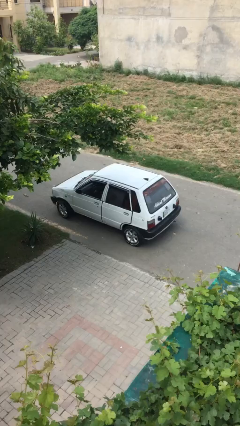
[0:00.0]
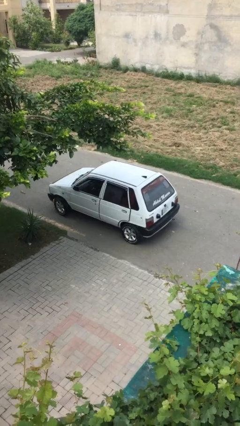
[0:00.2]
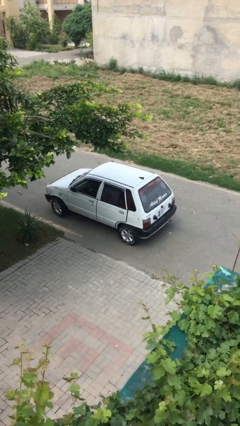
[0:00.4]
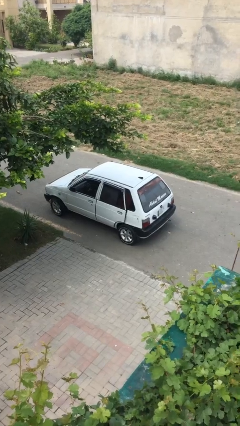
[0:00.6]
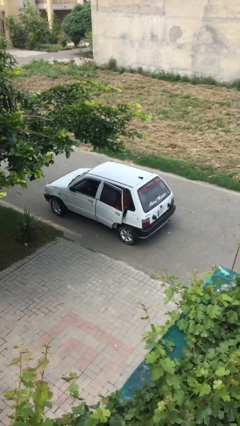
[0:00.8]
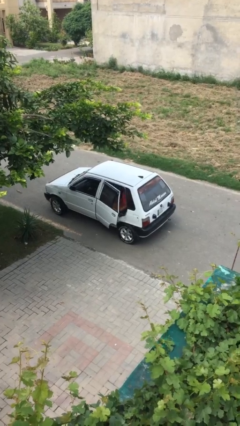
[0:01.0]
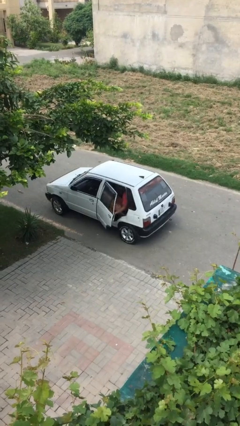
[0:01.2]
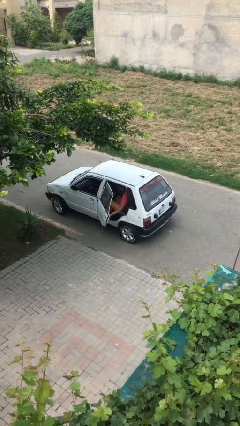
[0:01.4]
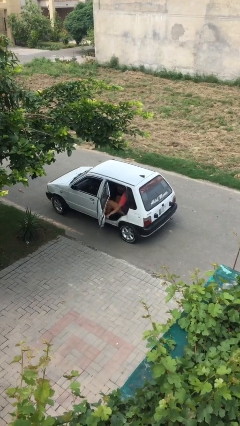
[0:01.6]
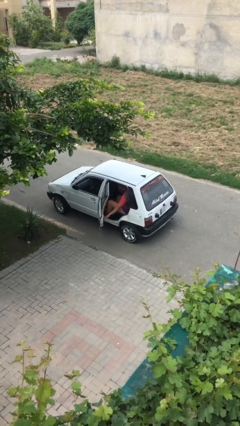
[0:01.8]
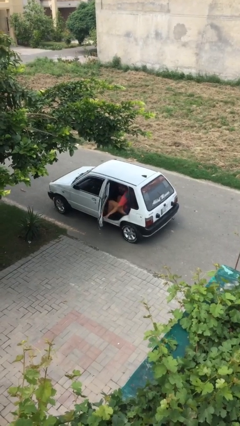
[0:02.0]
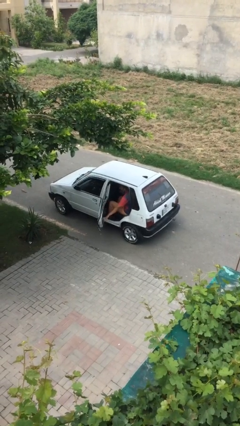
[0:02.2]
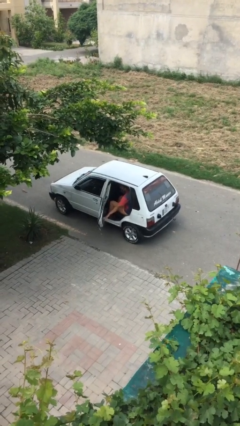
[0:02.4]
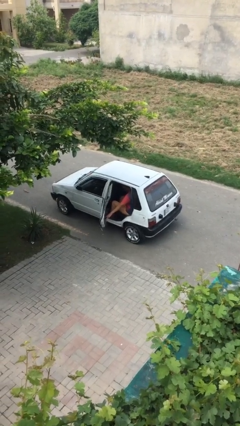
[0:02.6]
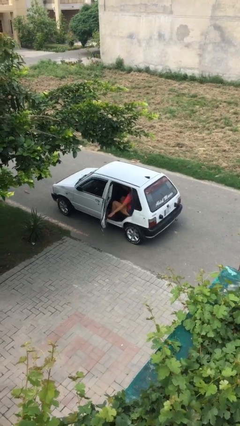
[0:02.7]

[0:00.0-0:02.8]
person opens car door

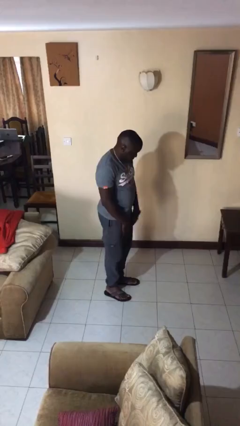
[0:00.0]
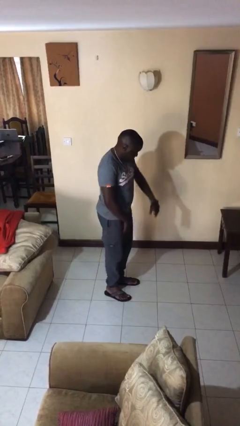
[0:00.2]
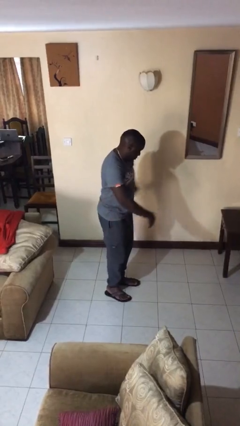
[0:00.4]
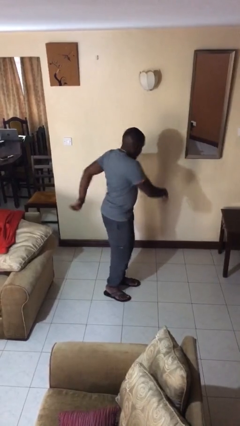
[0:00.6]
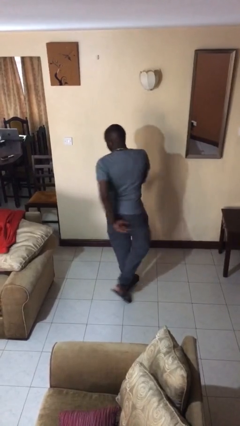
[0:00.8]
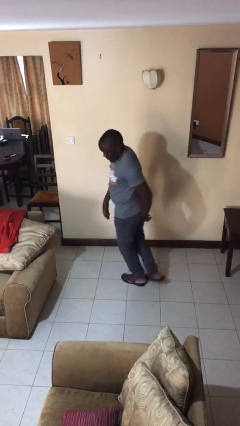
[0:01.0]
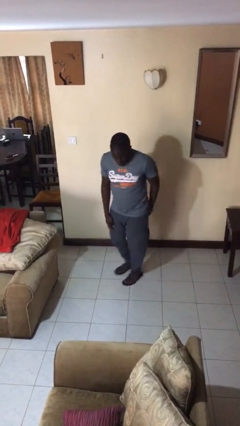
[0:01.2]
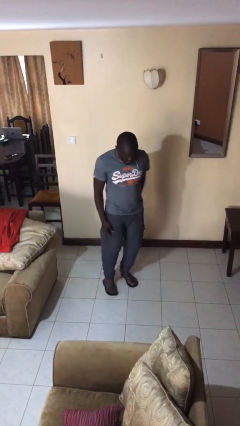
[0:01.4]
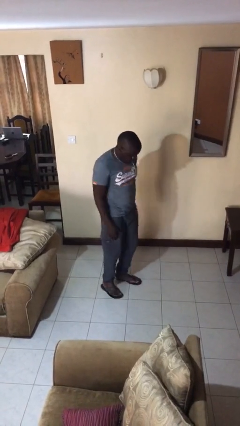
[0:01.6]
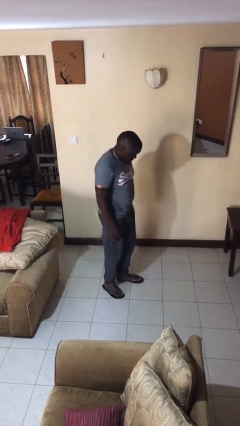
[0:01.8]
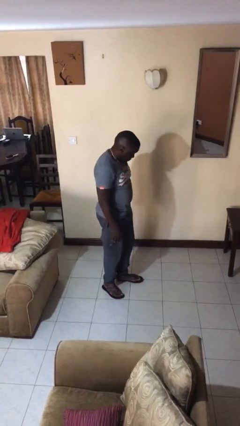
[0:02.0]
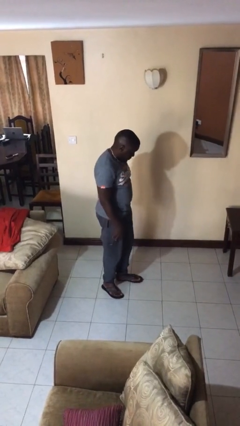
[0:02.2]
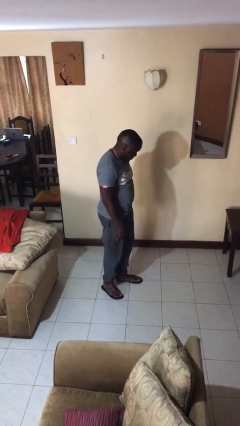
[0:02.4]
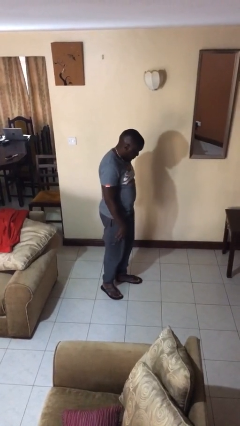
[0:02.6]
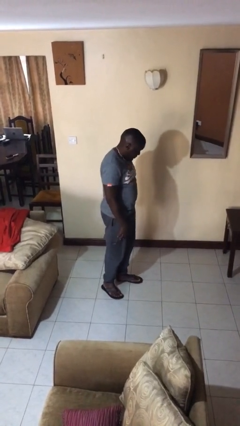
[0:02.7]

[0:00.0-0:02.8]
person twirls

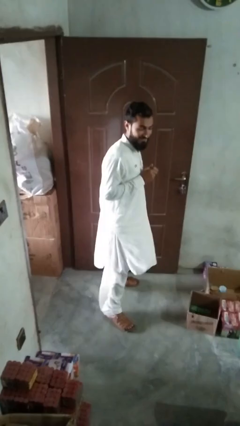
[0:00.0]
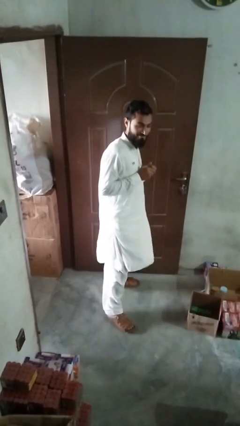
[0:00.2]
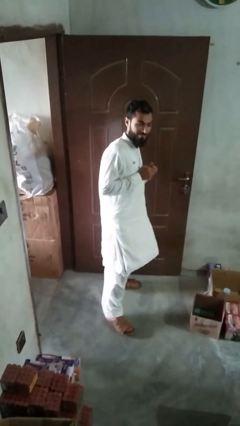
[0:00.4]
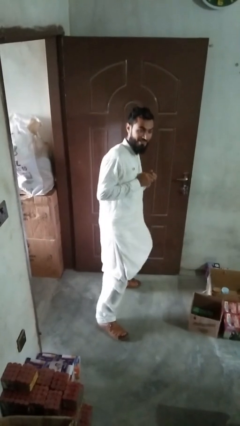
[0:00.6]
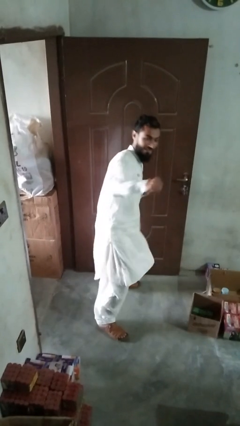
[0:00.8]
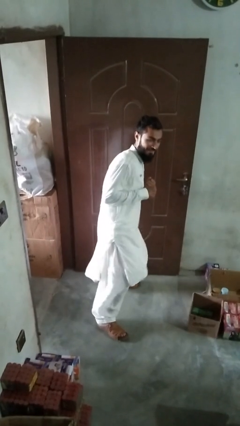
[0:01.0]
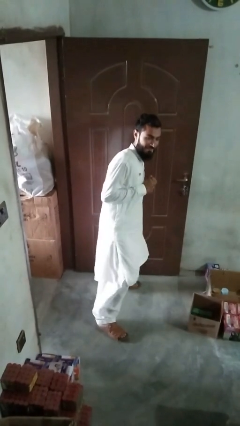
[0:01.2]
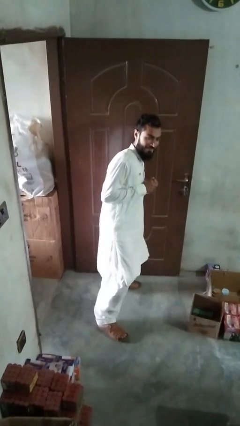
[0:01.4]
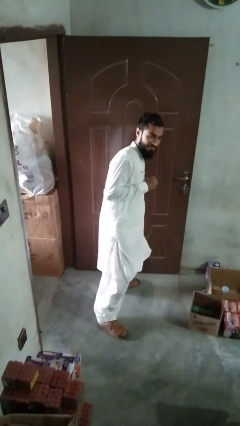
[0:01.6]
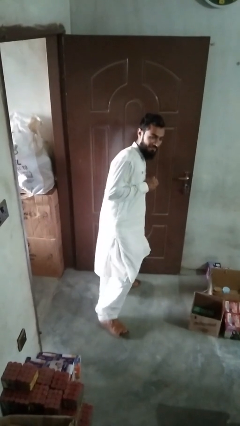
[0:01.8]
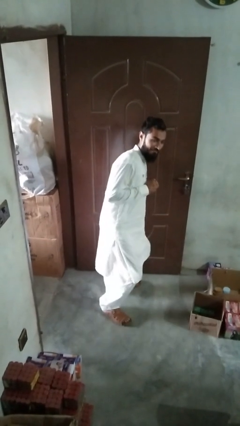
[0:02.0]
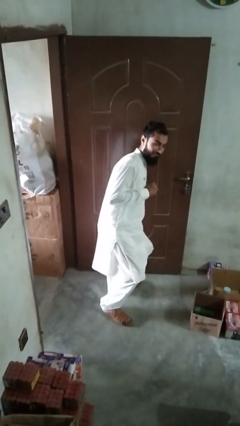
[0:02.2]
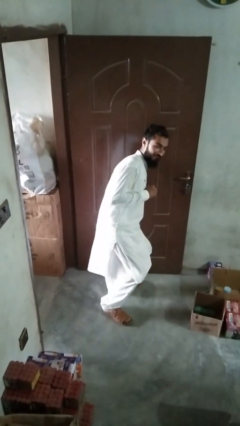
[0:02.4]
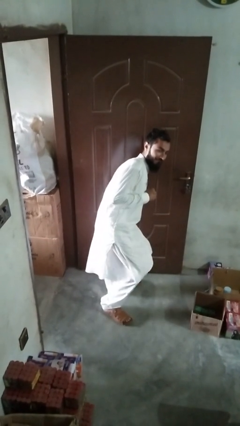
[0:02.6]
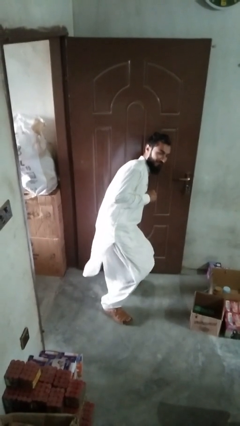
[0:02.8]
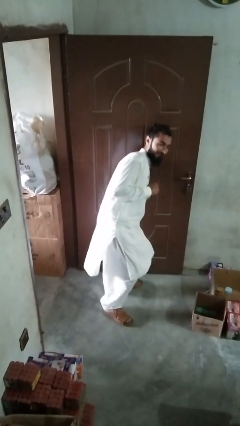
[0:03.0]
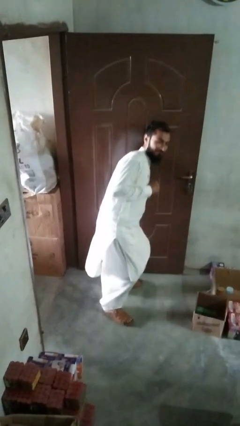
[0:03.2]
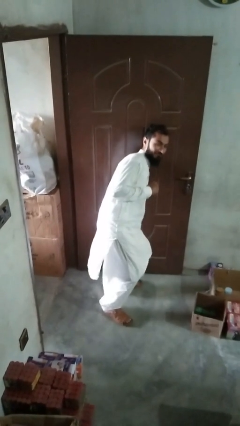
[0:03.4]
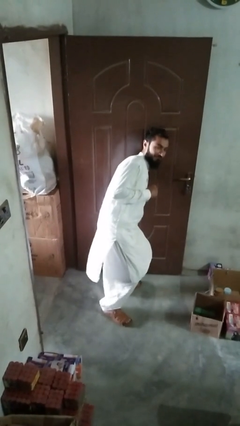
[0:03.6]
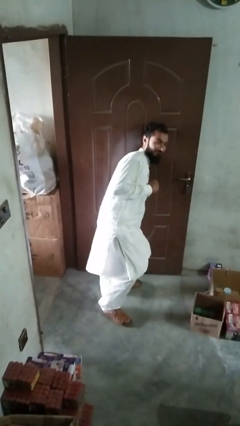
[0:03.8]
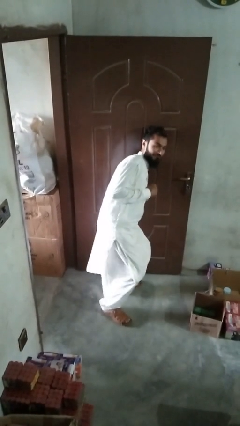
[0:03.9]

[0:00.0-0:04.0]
person karate chop

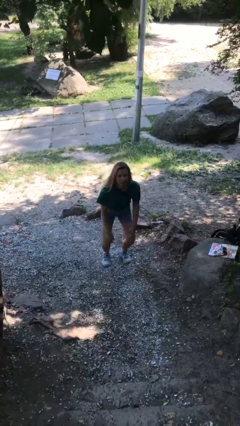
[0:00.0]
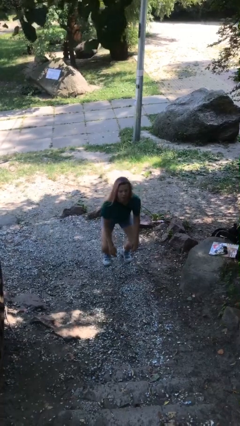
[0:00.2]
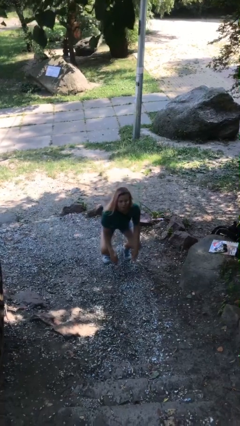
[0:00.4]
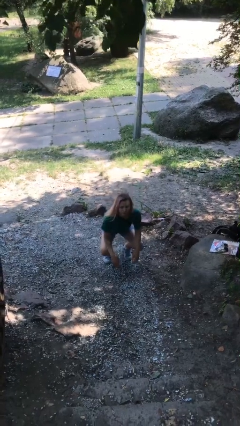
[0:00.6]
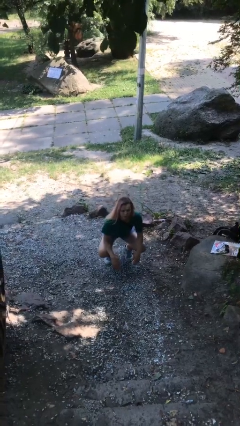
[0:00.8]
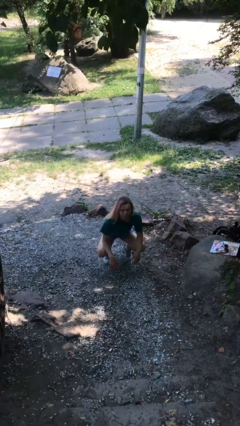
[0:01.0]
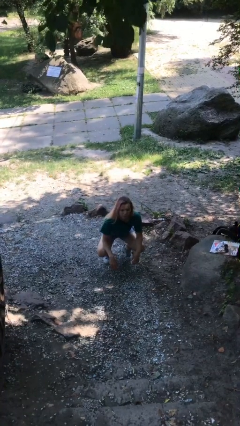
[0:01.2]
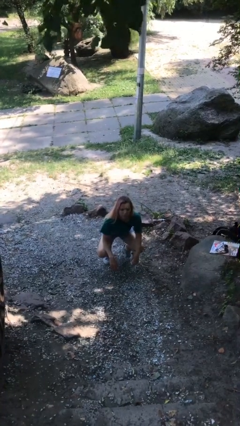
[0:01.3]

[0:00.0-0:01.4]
person squats

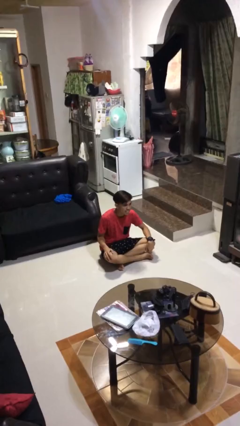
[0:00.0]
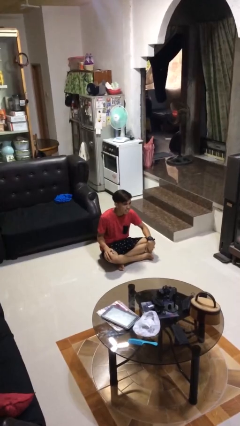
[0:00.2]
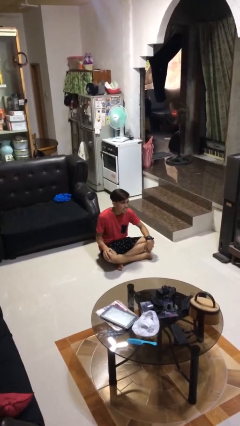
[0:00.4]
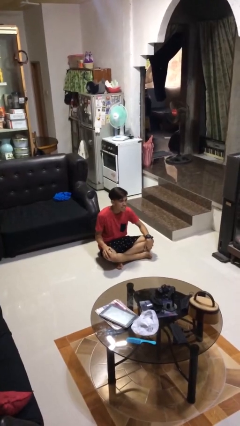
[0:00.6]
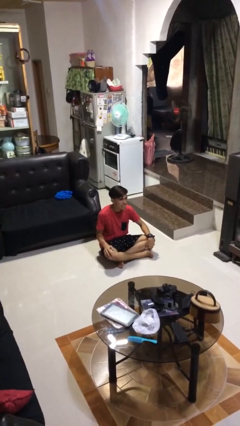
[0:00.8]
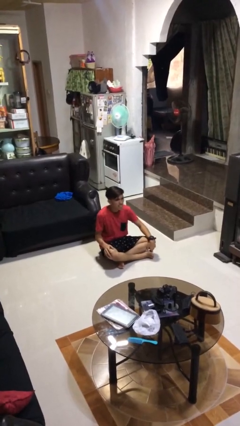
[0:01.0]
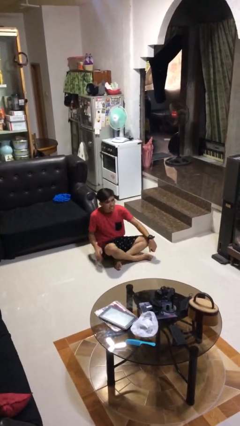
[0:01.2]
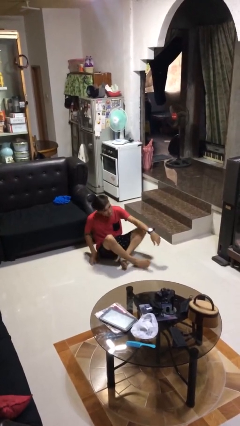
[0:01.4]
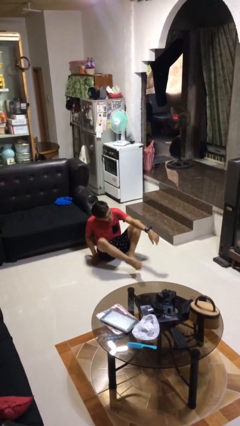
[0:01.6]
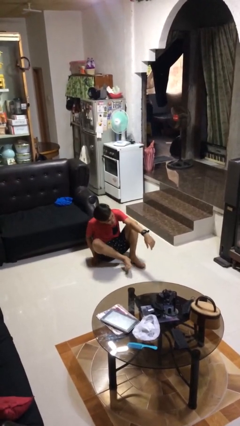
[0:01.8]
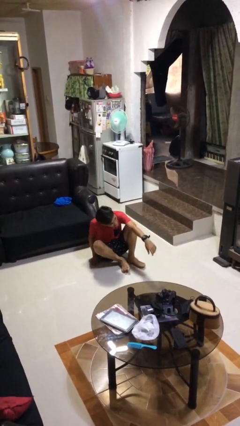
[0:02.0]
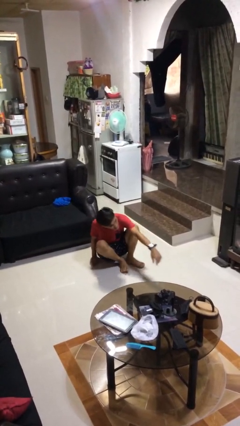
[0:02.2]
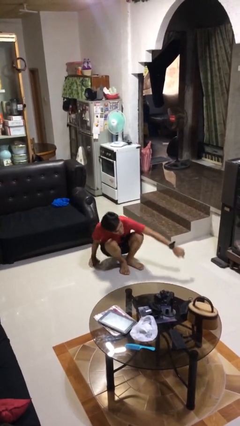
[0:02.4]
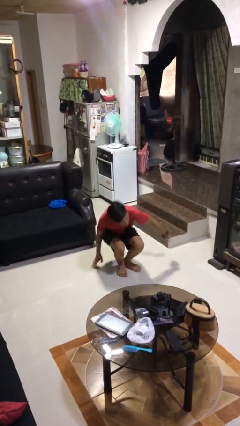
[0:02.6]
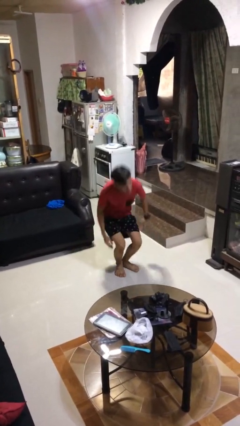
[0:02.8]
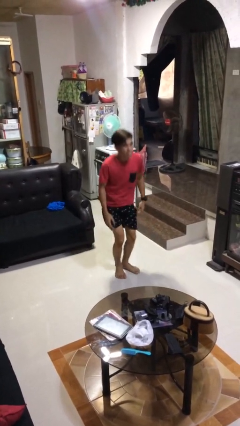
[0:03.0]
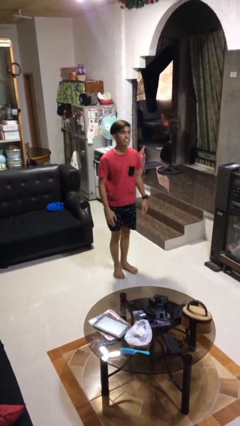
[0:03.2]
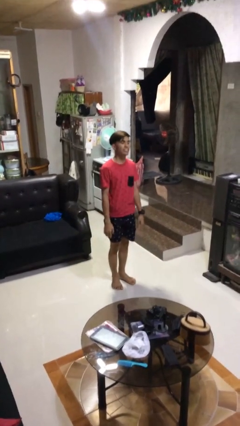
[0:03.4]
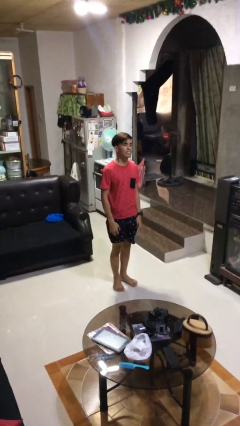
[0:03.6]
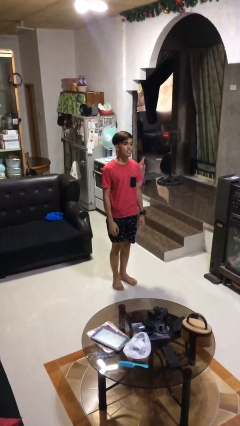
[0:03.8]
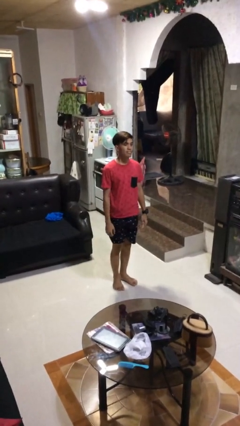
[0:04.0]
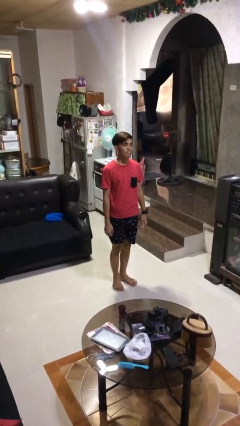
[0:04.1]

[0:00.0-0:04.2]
person stands up from floor

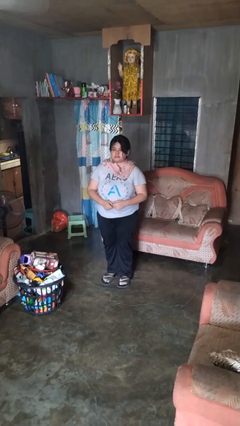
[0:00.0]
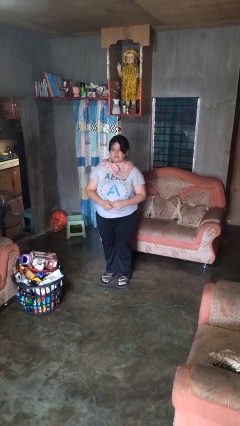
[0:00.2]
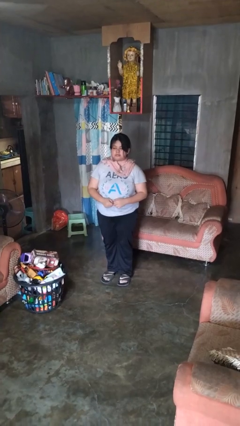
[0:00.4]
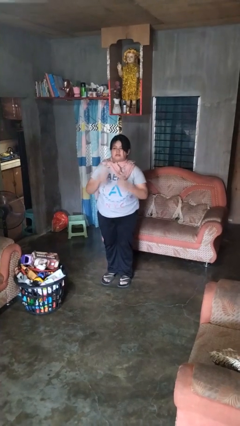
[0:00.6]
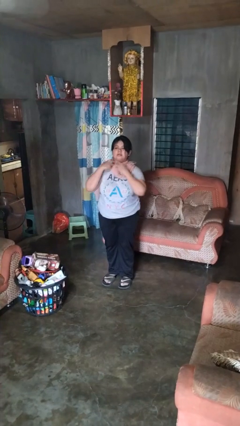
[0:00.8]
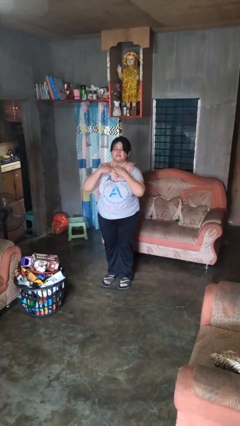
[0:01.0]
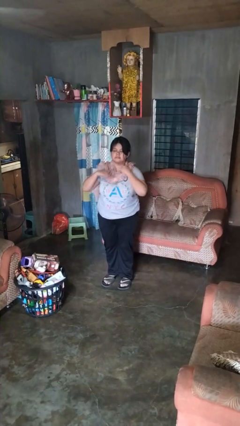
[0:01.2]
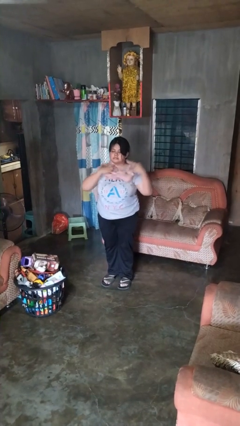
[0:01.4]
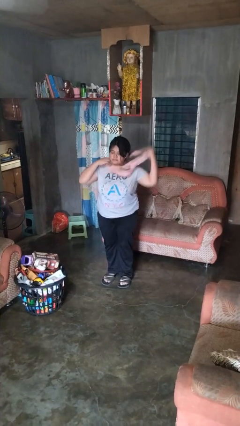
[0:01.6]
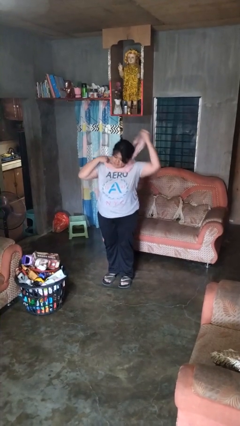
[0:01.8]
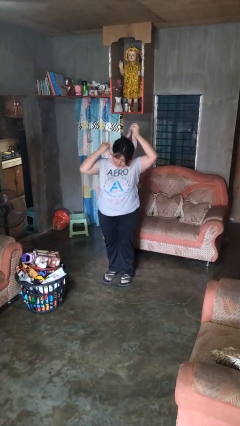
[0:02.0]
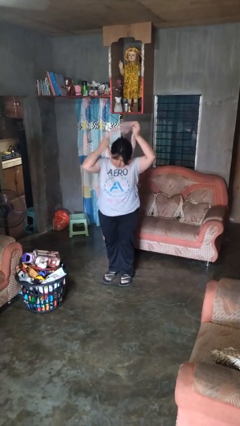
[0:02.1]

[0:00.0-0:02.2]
person takes off scarf

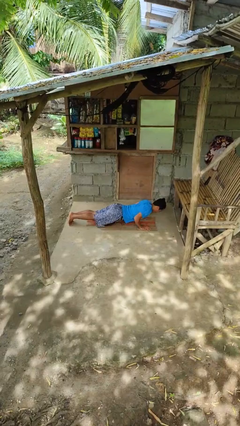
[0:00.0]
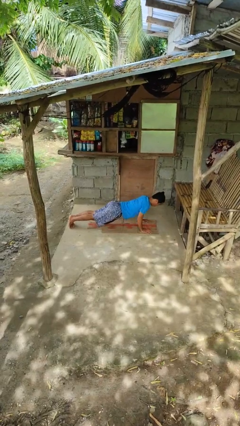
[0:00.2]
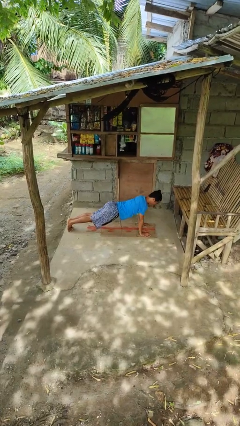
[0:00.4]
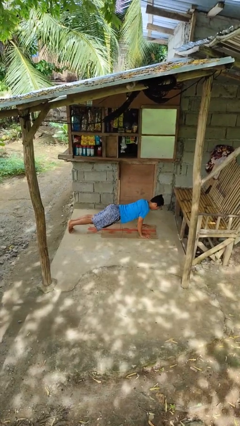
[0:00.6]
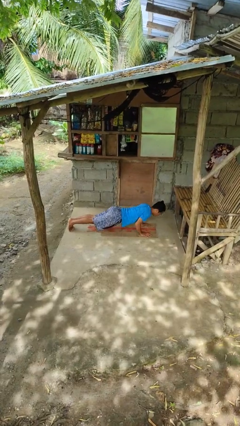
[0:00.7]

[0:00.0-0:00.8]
person exercises with pushup
